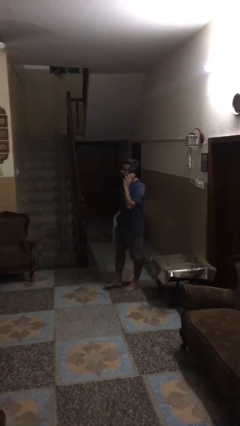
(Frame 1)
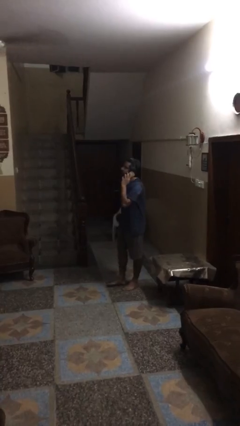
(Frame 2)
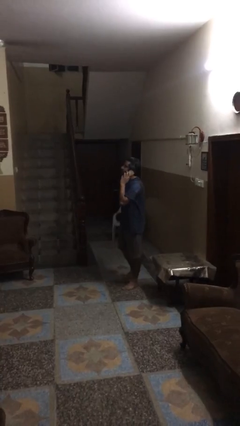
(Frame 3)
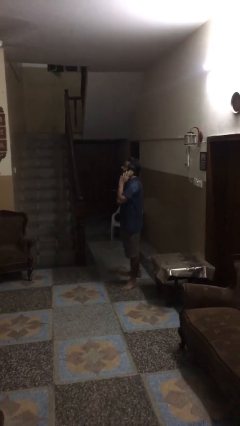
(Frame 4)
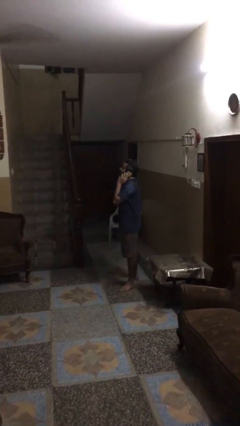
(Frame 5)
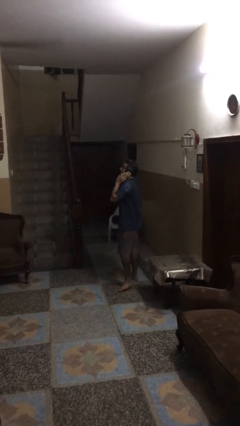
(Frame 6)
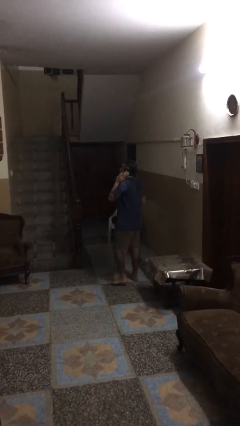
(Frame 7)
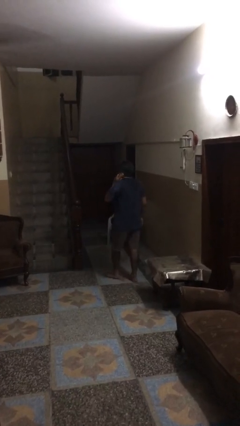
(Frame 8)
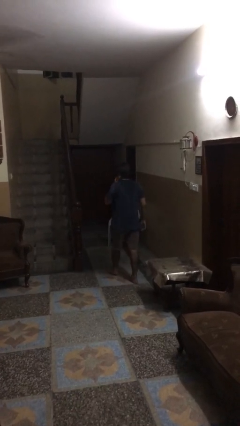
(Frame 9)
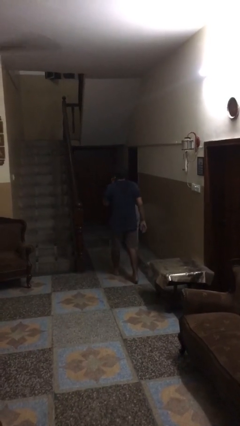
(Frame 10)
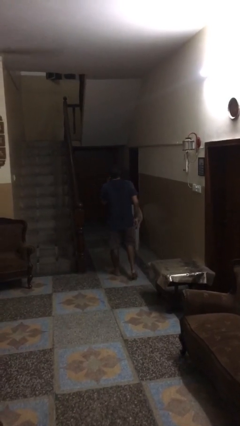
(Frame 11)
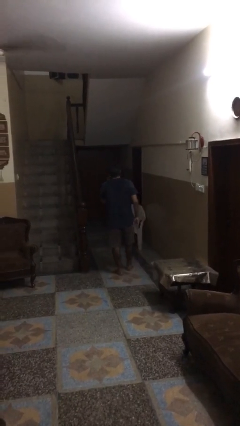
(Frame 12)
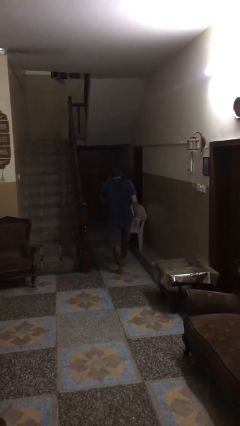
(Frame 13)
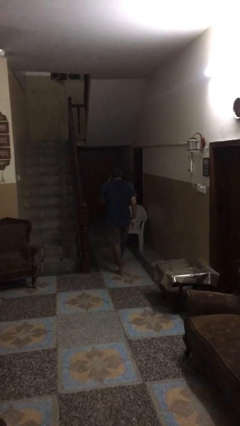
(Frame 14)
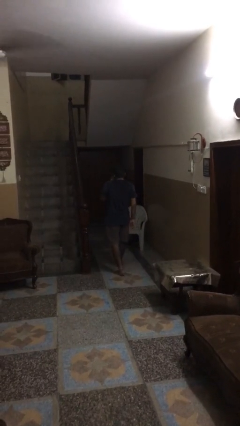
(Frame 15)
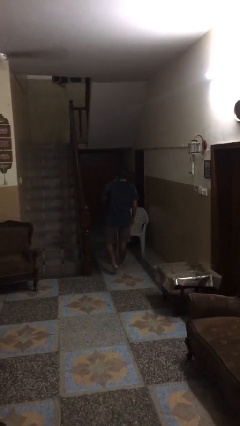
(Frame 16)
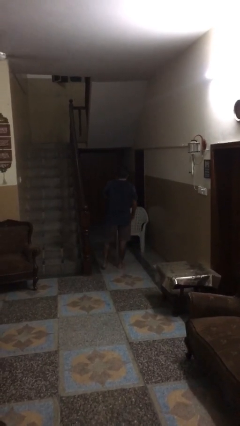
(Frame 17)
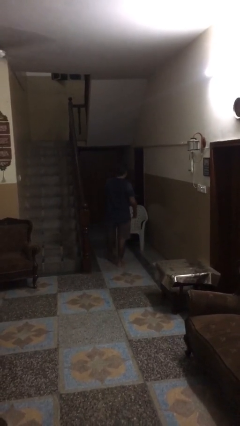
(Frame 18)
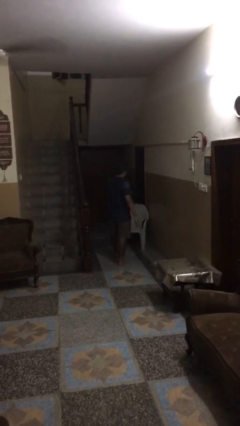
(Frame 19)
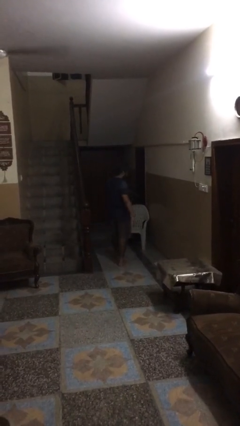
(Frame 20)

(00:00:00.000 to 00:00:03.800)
person talks on phone

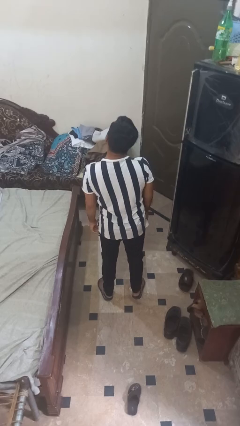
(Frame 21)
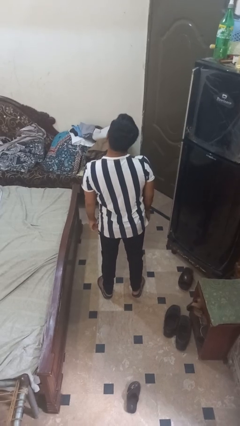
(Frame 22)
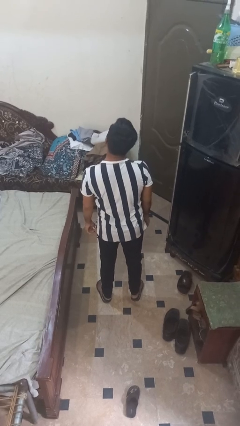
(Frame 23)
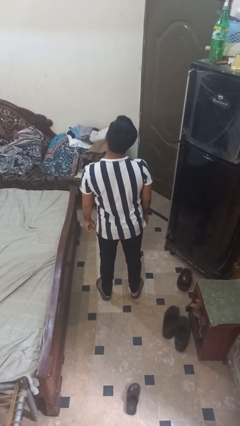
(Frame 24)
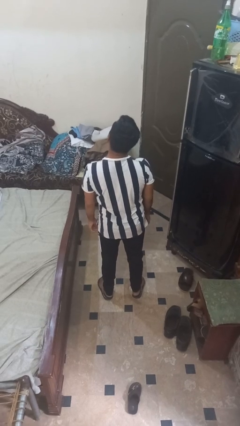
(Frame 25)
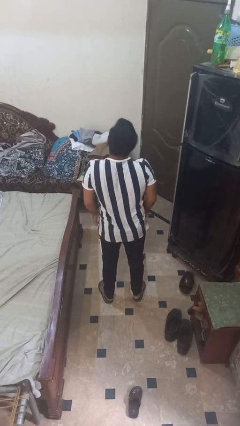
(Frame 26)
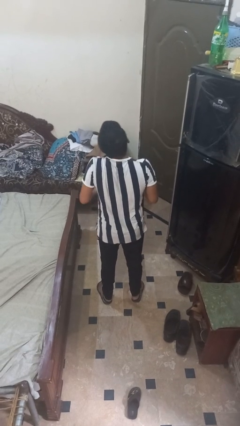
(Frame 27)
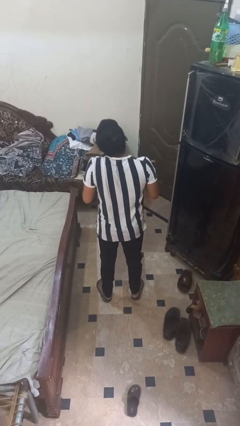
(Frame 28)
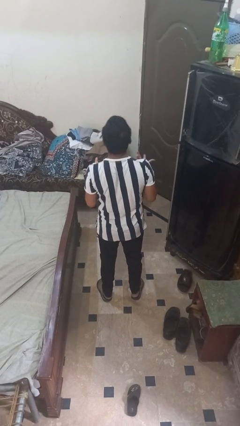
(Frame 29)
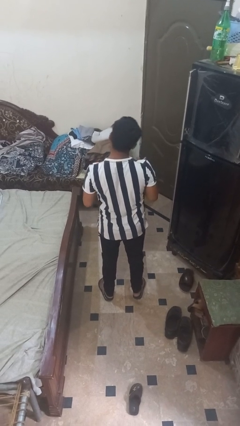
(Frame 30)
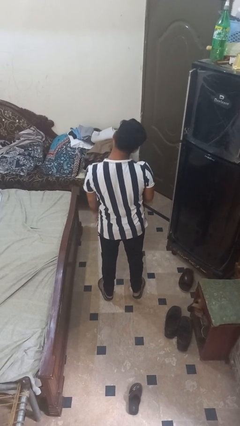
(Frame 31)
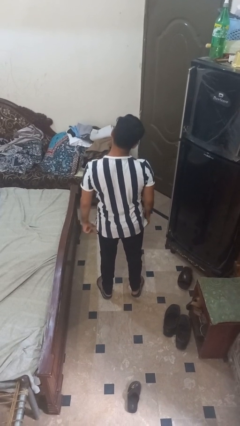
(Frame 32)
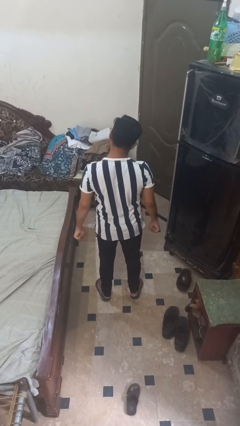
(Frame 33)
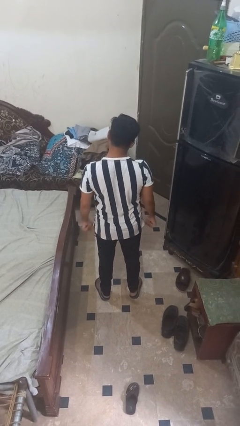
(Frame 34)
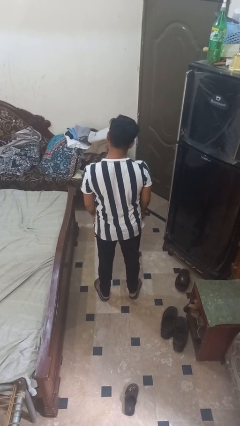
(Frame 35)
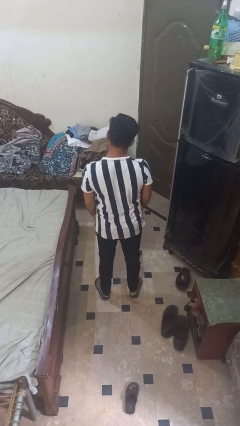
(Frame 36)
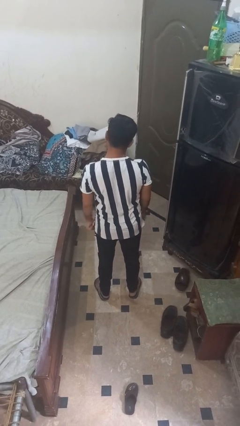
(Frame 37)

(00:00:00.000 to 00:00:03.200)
person shrugs

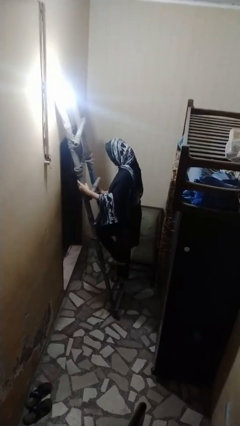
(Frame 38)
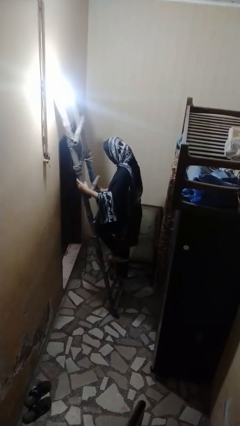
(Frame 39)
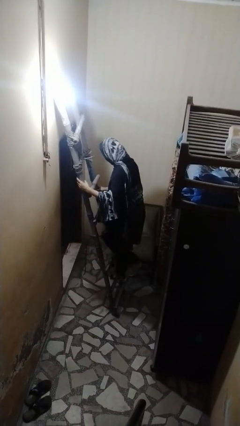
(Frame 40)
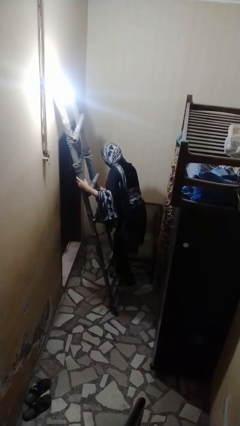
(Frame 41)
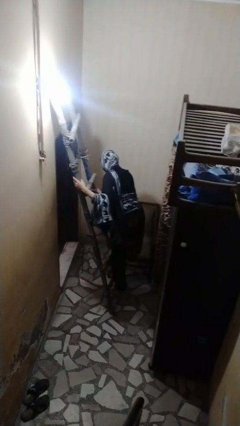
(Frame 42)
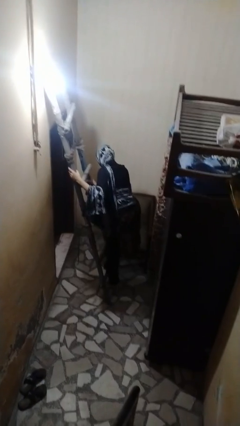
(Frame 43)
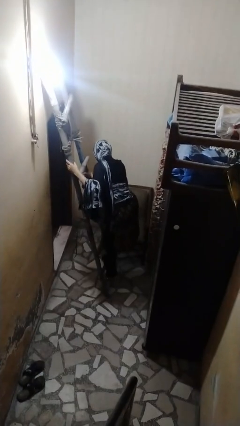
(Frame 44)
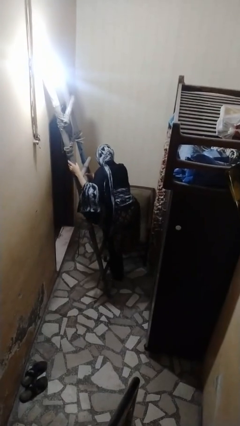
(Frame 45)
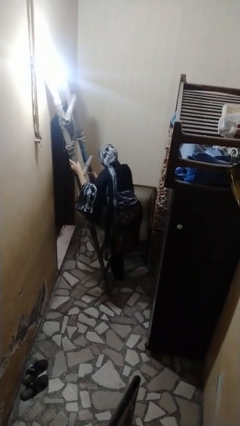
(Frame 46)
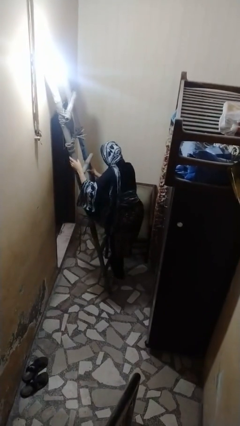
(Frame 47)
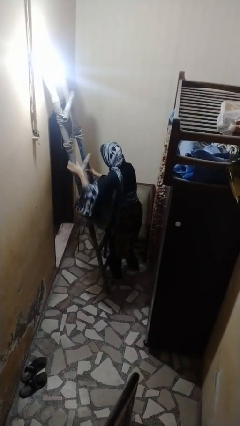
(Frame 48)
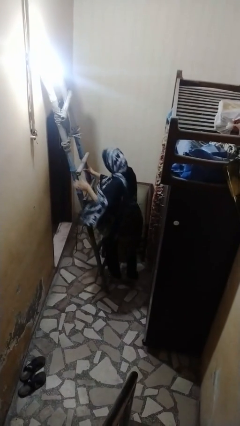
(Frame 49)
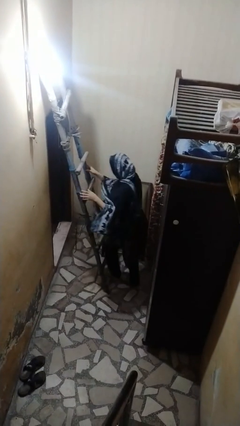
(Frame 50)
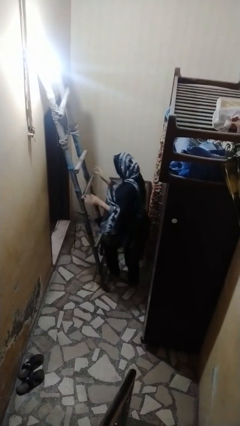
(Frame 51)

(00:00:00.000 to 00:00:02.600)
person climbs down ladder

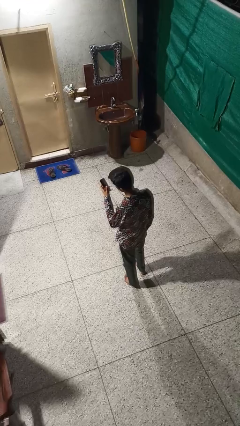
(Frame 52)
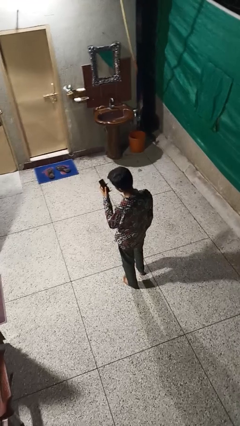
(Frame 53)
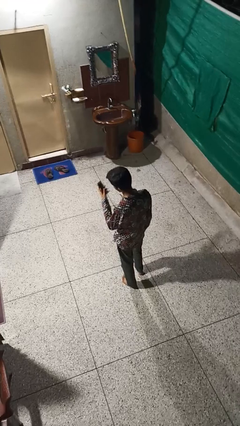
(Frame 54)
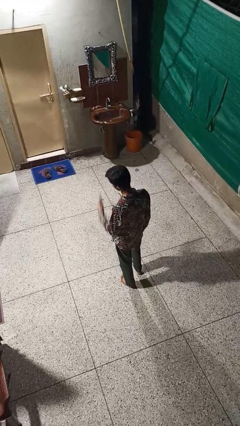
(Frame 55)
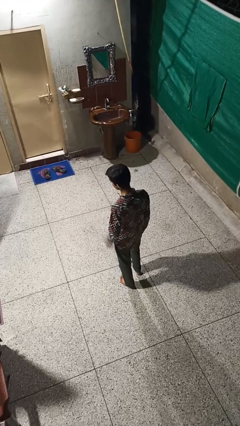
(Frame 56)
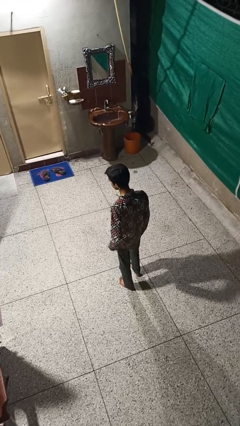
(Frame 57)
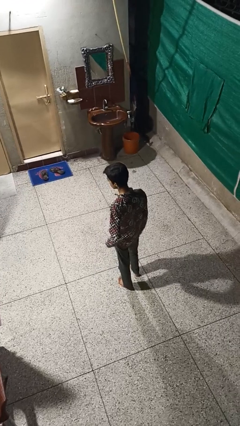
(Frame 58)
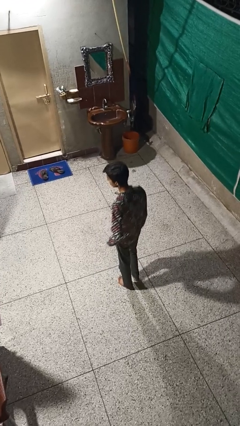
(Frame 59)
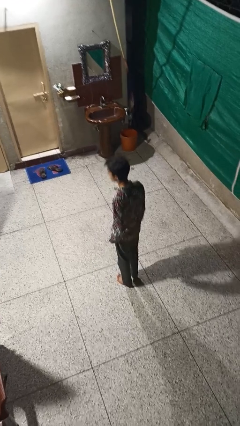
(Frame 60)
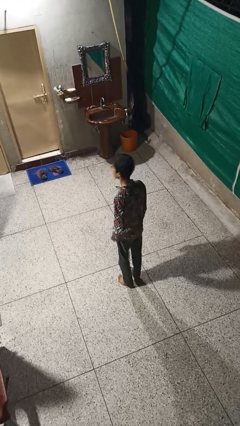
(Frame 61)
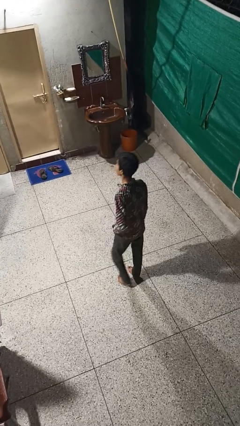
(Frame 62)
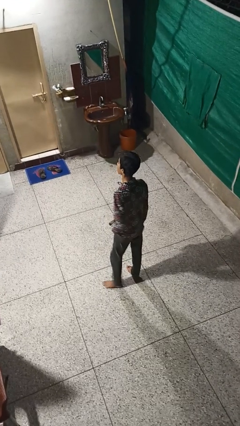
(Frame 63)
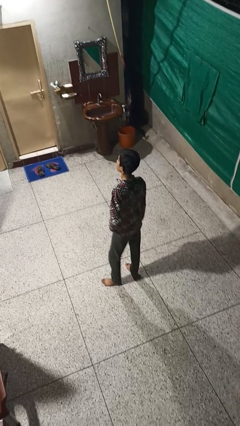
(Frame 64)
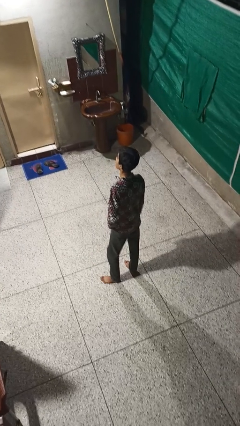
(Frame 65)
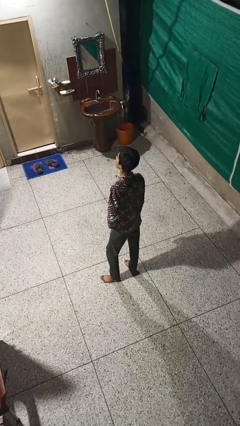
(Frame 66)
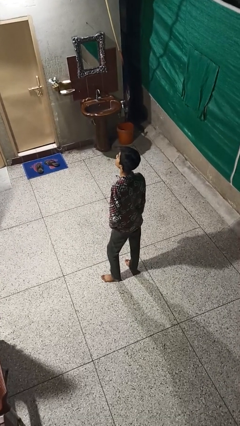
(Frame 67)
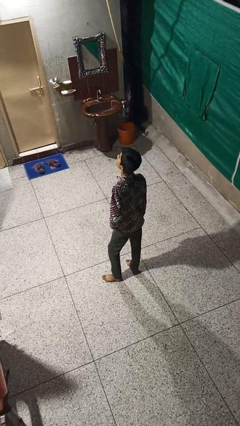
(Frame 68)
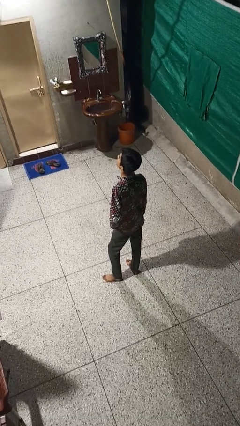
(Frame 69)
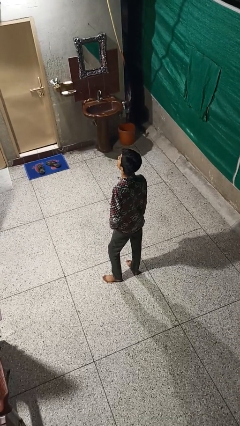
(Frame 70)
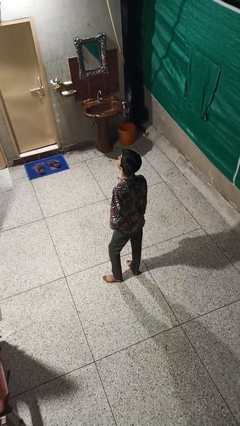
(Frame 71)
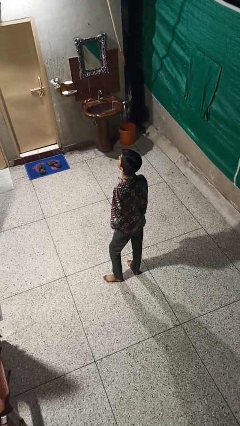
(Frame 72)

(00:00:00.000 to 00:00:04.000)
person puts phone into pocket

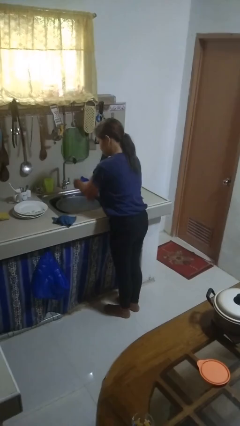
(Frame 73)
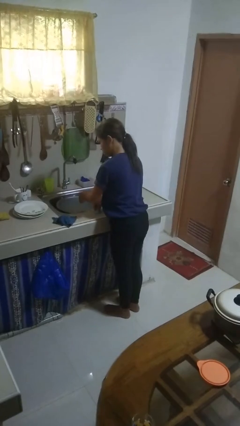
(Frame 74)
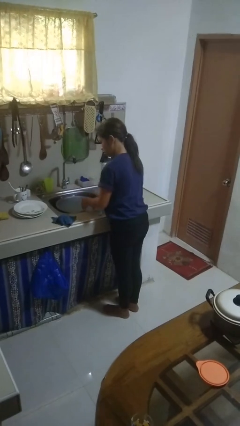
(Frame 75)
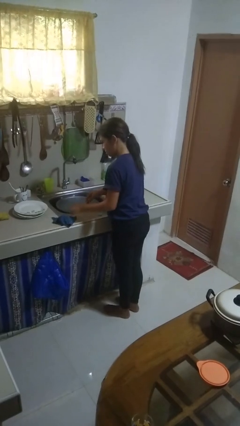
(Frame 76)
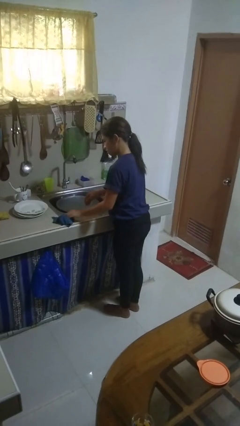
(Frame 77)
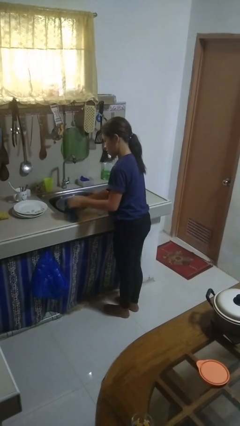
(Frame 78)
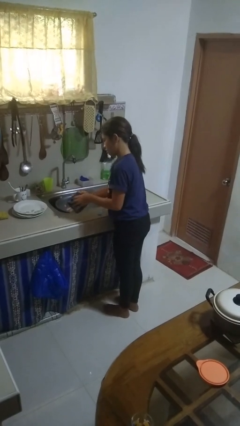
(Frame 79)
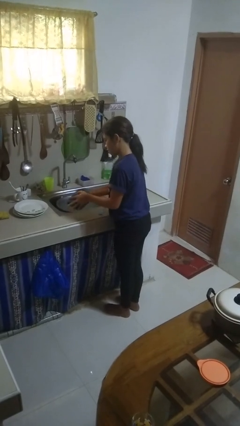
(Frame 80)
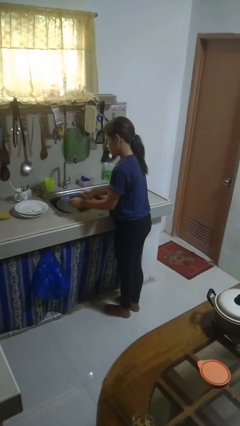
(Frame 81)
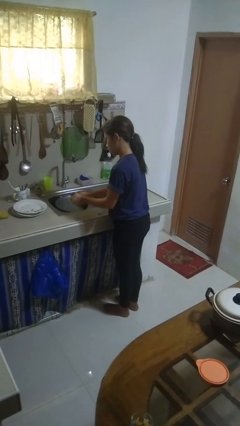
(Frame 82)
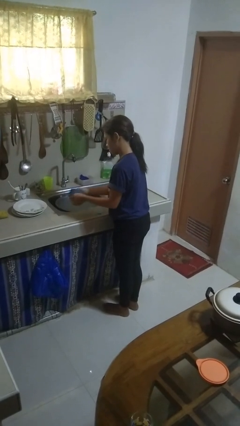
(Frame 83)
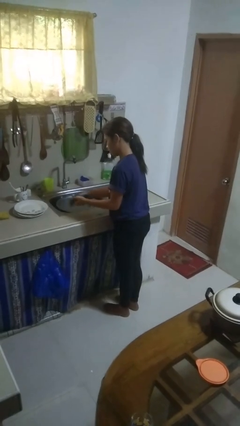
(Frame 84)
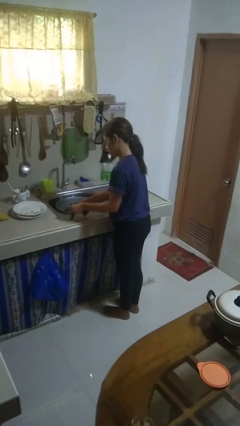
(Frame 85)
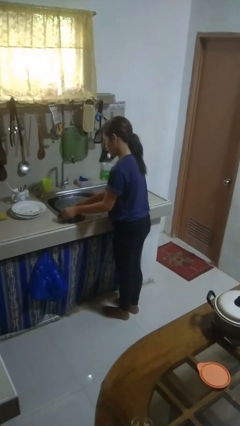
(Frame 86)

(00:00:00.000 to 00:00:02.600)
person dries hands with towel

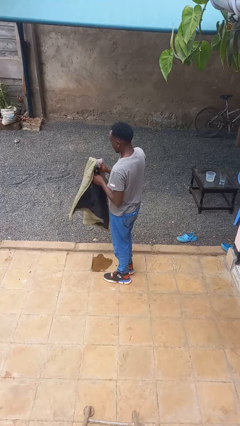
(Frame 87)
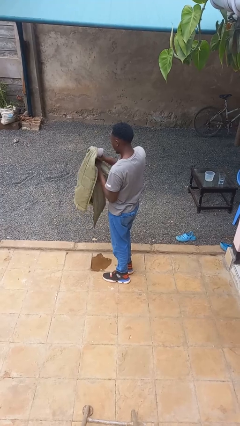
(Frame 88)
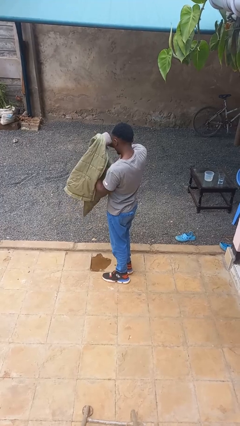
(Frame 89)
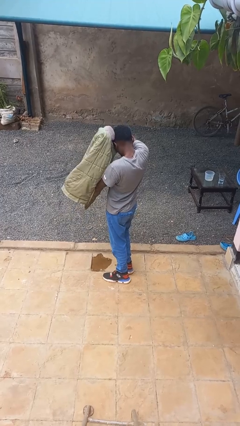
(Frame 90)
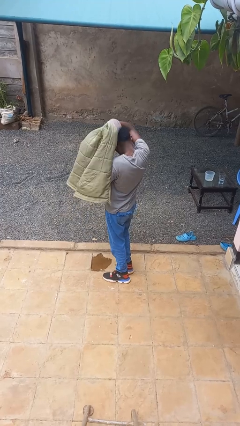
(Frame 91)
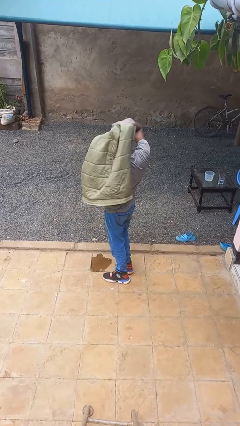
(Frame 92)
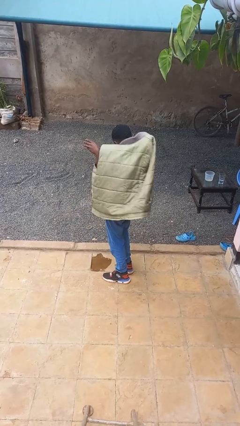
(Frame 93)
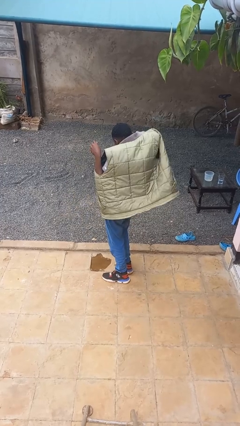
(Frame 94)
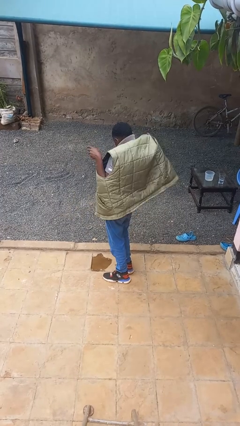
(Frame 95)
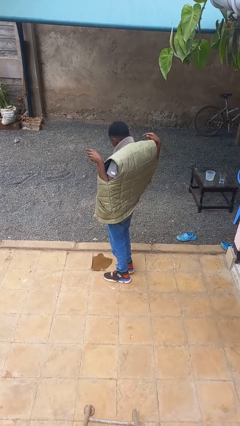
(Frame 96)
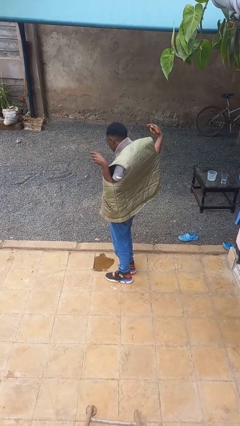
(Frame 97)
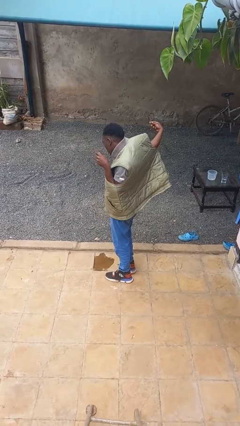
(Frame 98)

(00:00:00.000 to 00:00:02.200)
person puts on jacket